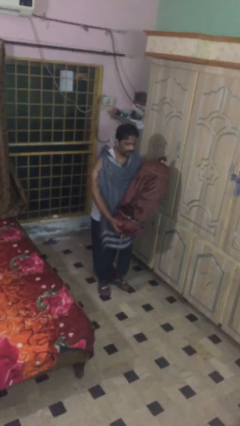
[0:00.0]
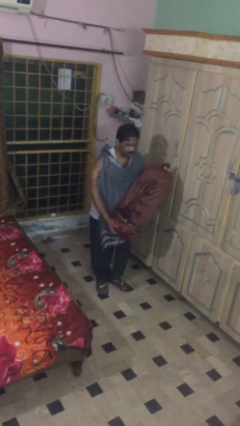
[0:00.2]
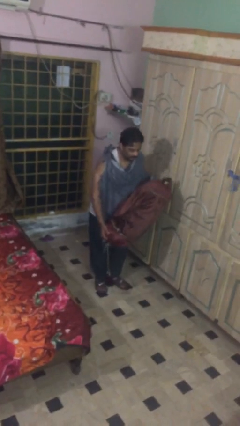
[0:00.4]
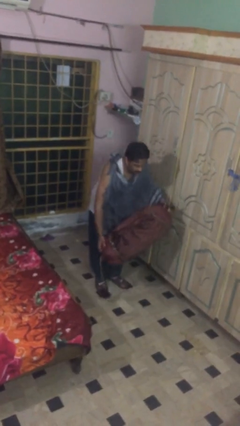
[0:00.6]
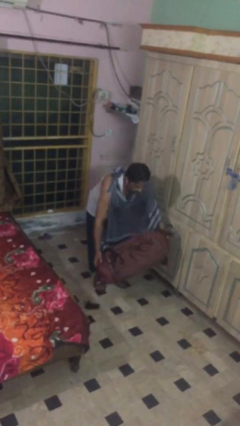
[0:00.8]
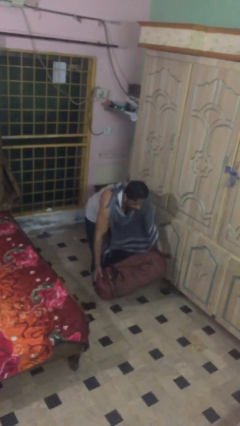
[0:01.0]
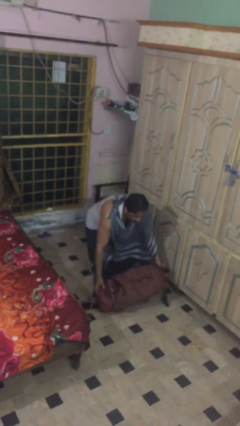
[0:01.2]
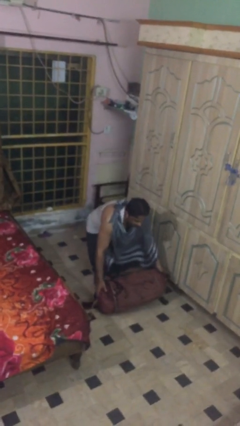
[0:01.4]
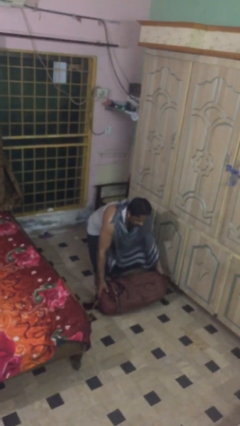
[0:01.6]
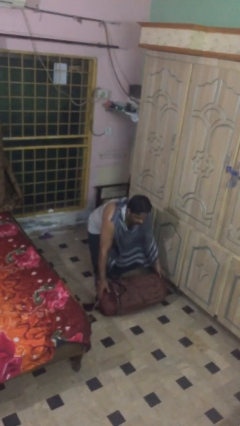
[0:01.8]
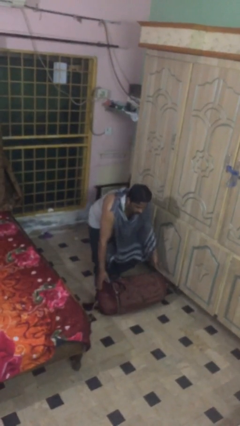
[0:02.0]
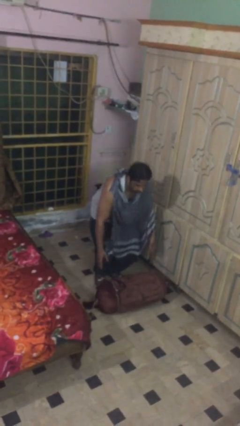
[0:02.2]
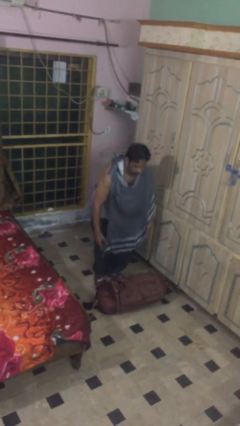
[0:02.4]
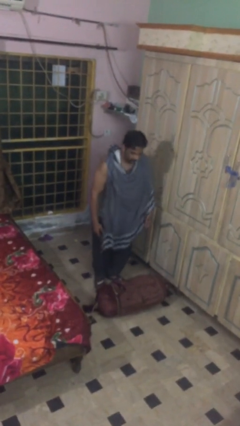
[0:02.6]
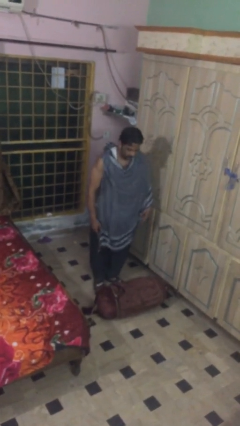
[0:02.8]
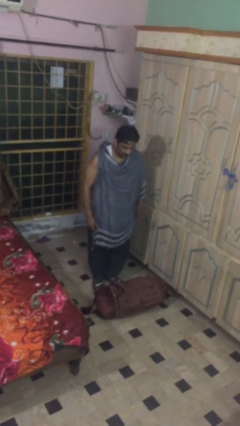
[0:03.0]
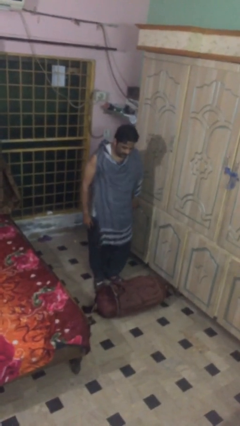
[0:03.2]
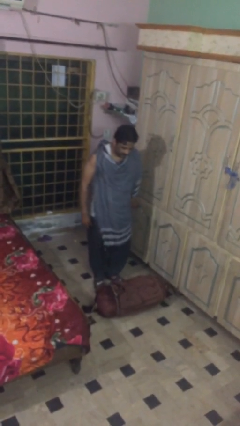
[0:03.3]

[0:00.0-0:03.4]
person puts down object on floor

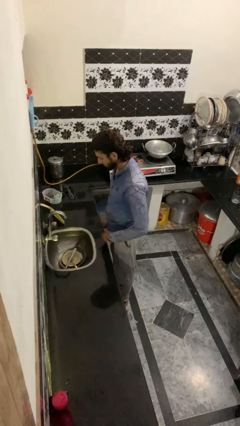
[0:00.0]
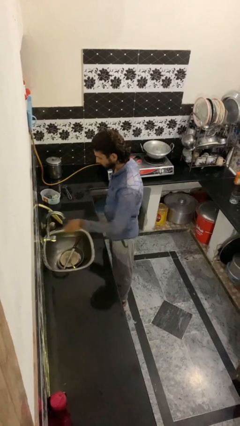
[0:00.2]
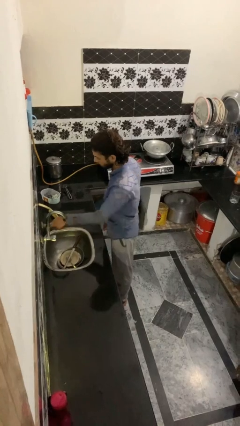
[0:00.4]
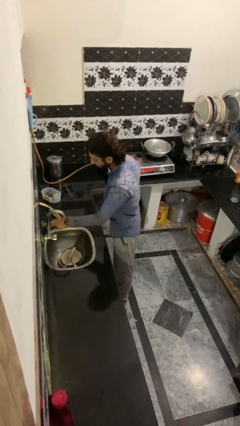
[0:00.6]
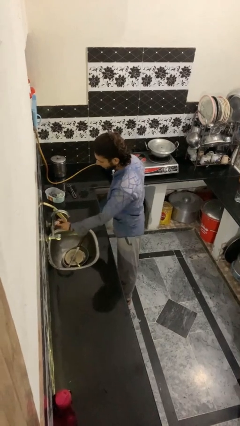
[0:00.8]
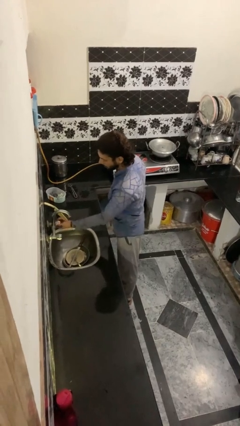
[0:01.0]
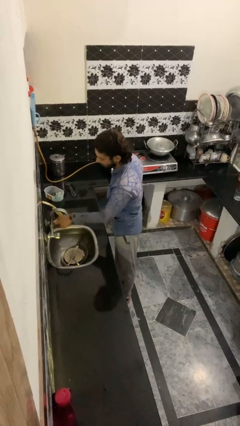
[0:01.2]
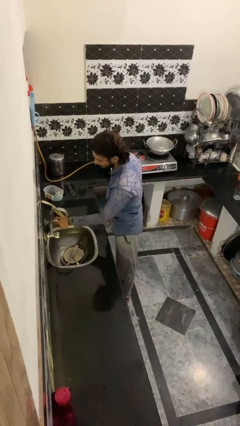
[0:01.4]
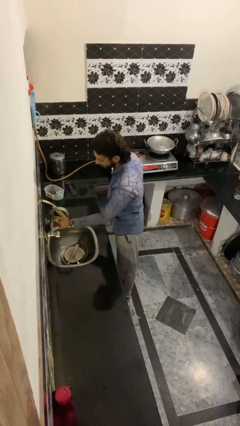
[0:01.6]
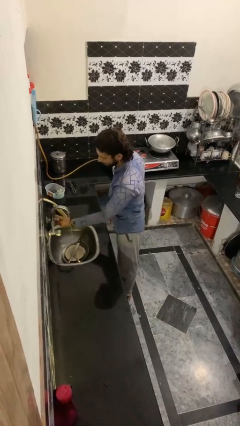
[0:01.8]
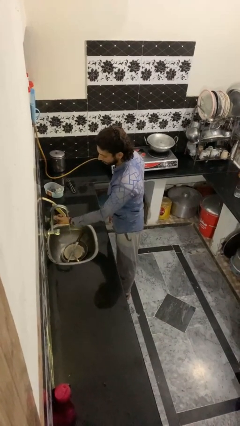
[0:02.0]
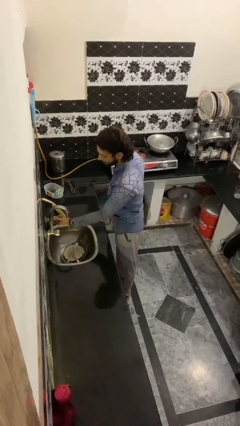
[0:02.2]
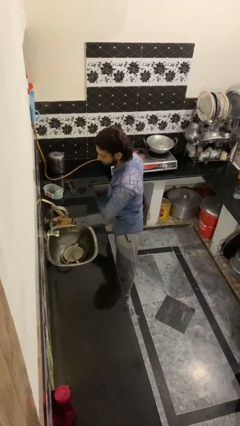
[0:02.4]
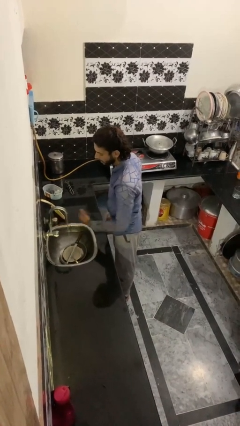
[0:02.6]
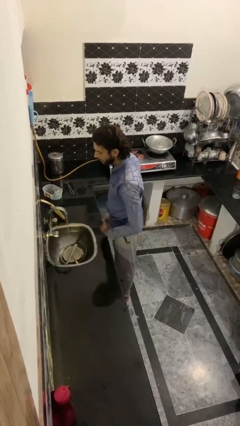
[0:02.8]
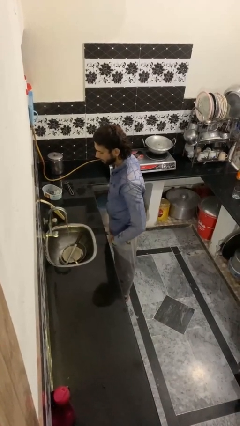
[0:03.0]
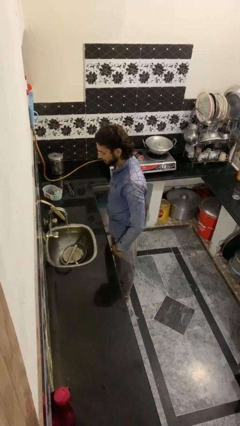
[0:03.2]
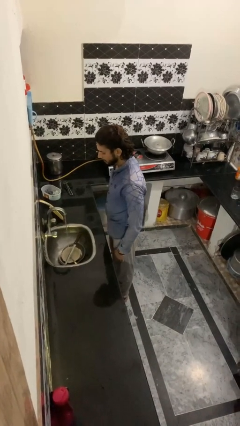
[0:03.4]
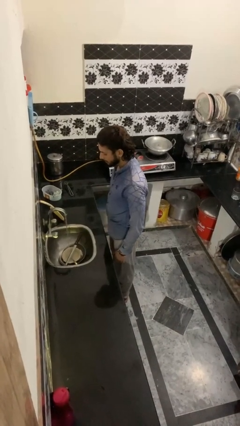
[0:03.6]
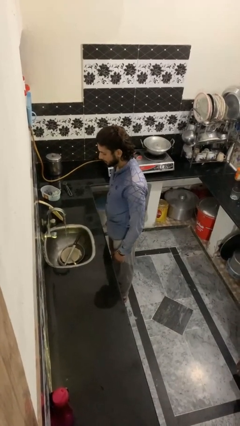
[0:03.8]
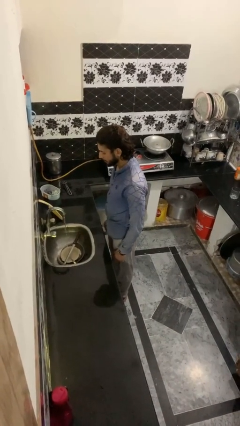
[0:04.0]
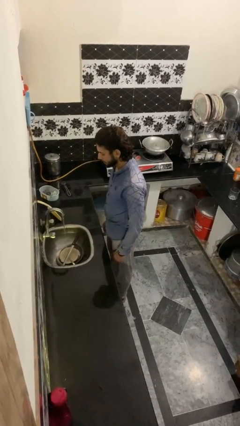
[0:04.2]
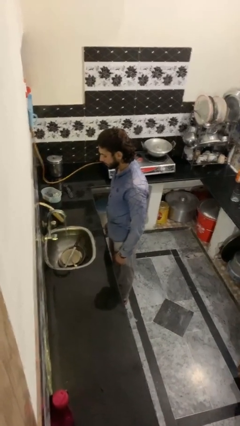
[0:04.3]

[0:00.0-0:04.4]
person turns on faucet

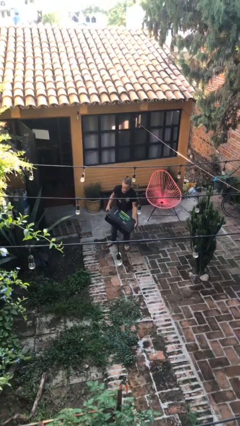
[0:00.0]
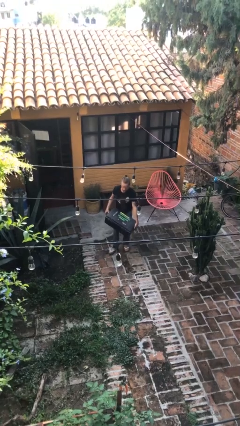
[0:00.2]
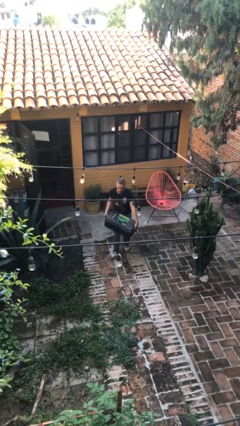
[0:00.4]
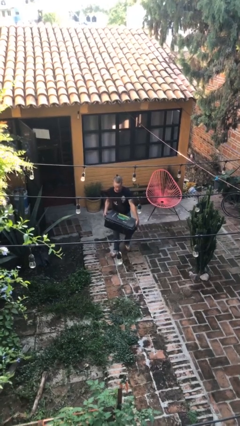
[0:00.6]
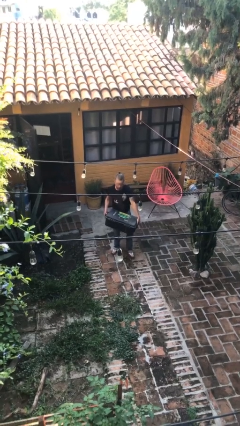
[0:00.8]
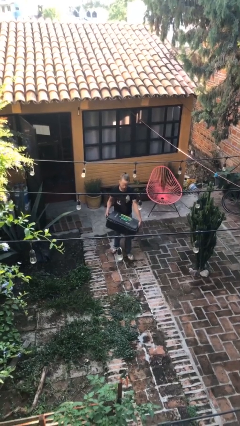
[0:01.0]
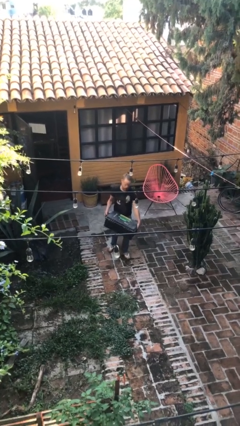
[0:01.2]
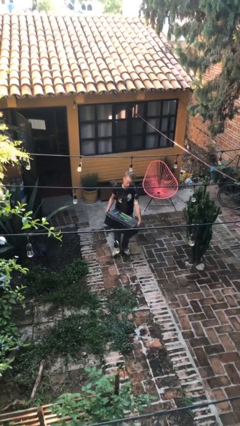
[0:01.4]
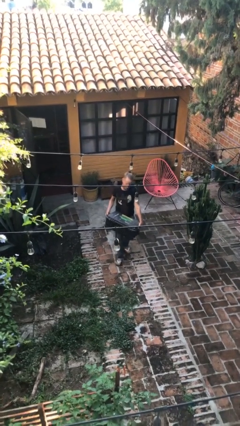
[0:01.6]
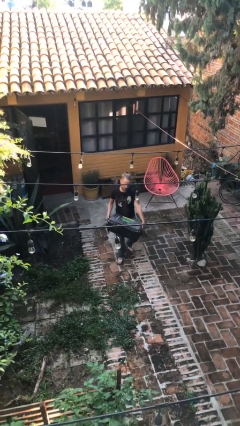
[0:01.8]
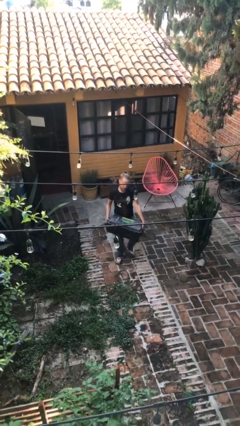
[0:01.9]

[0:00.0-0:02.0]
person carries heavy object

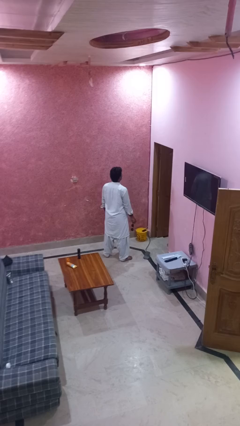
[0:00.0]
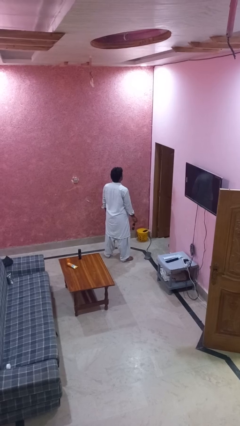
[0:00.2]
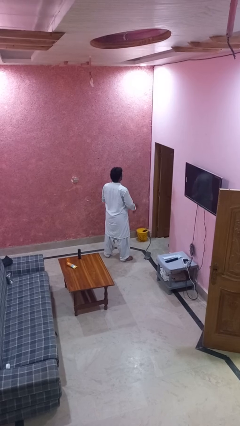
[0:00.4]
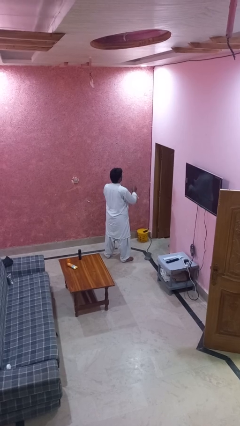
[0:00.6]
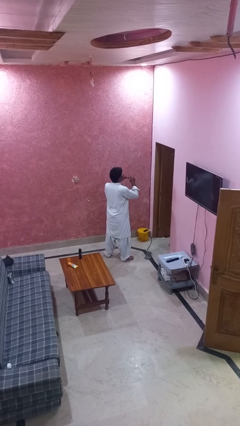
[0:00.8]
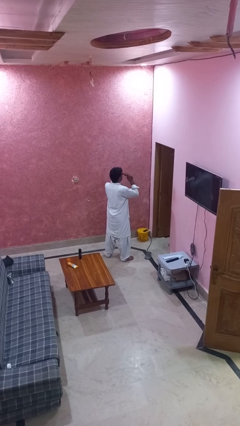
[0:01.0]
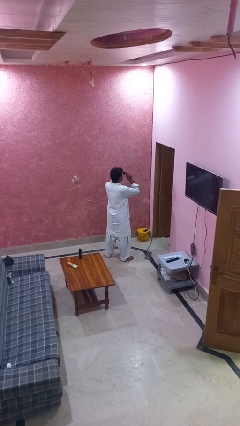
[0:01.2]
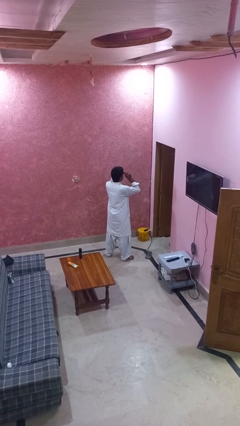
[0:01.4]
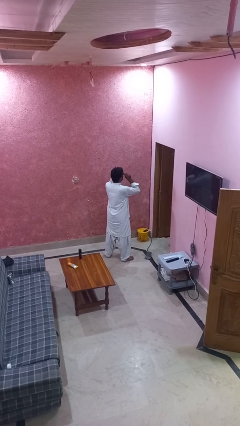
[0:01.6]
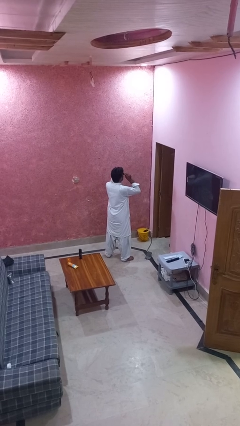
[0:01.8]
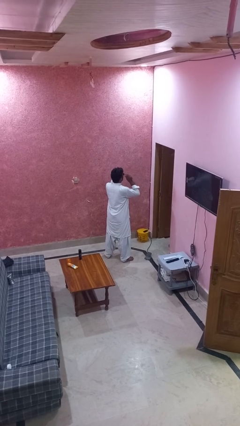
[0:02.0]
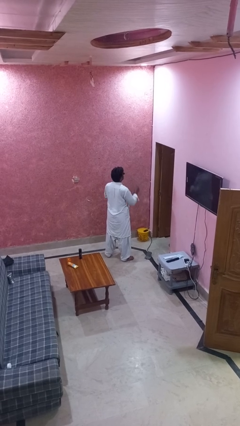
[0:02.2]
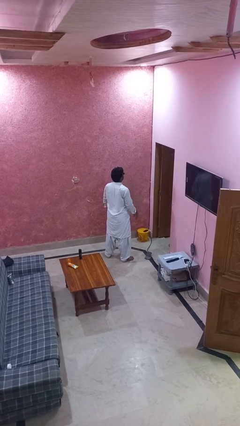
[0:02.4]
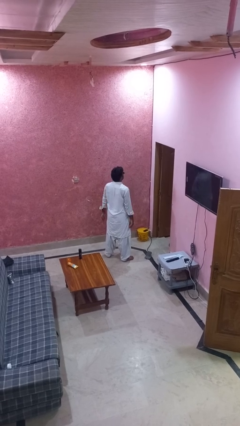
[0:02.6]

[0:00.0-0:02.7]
person puts on sunglasses

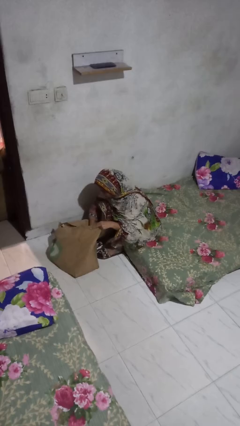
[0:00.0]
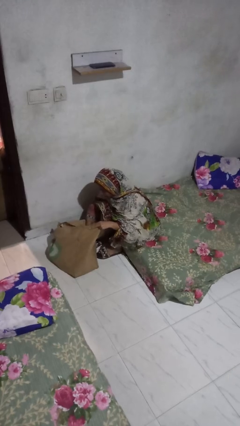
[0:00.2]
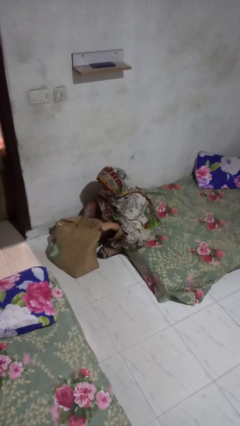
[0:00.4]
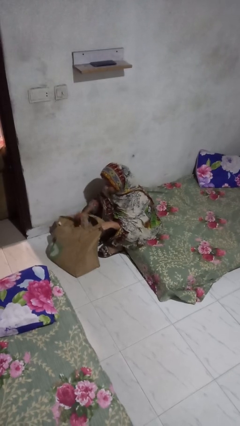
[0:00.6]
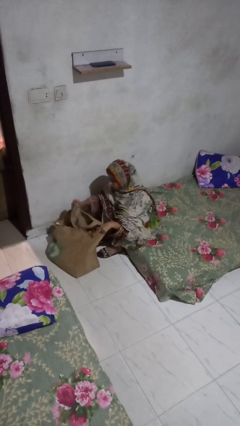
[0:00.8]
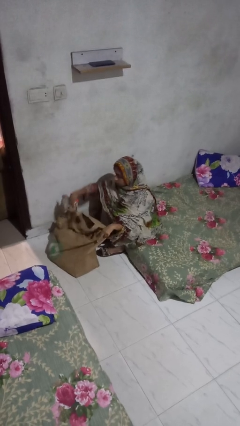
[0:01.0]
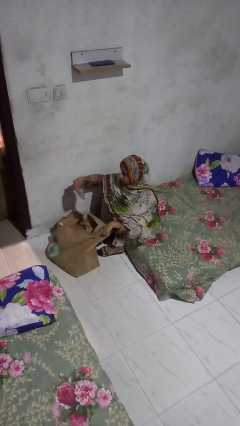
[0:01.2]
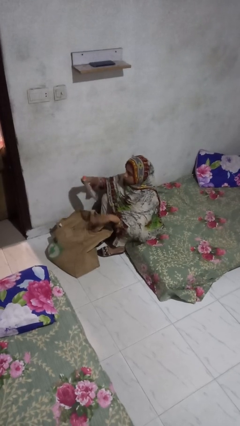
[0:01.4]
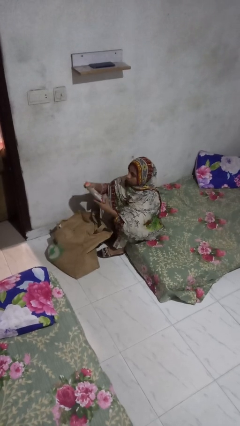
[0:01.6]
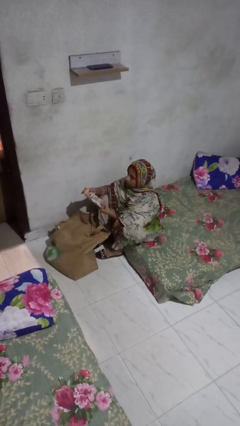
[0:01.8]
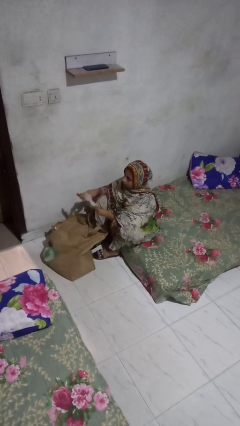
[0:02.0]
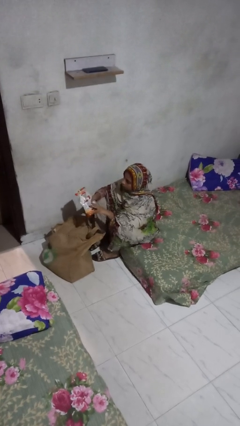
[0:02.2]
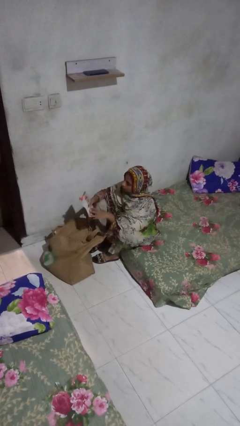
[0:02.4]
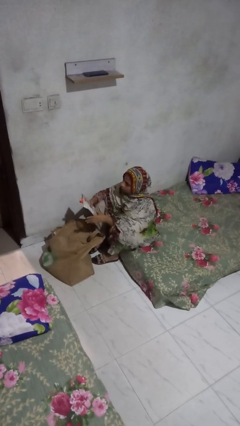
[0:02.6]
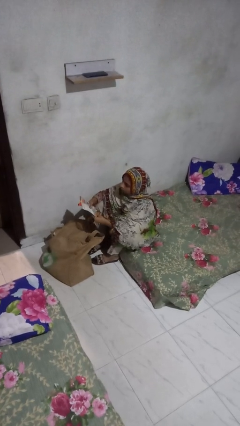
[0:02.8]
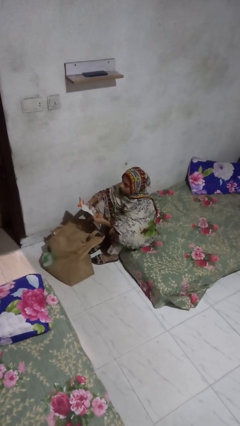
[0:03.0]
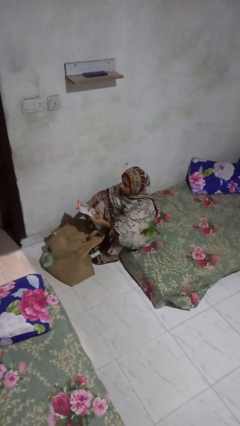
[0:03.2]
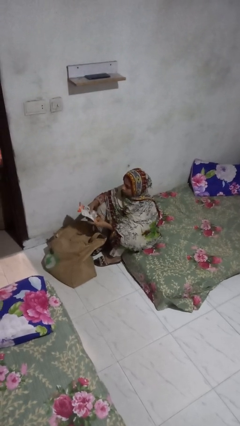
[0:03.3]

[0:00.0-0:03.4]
person takes object from bag

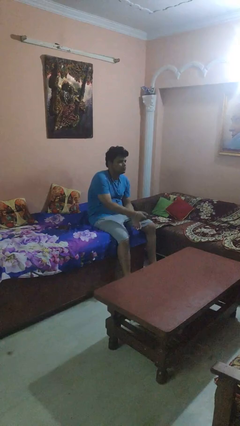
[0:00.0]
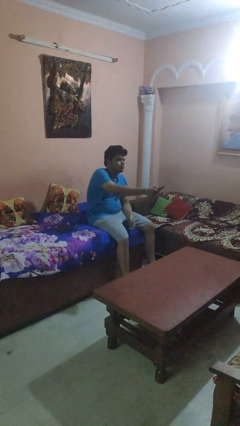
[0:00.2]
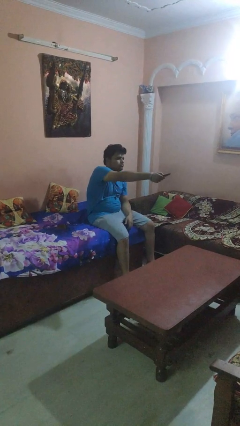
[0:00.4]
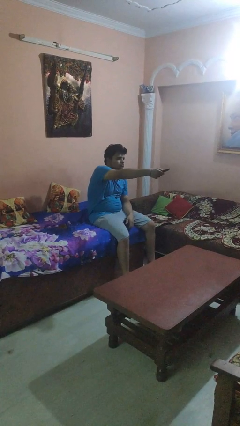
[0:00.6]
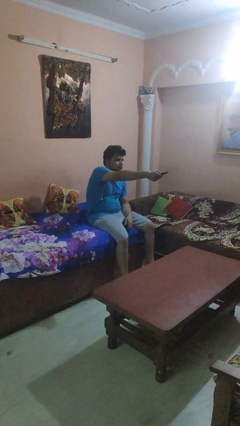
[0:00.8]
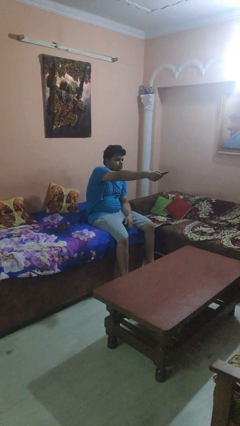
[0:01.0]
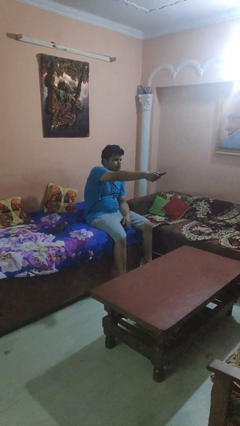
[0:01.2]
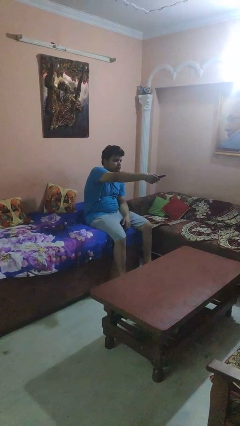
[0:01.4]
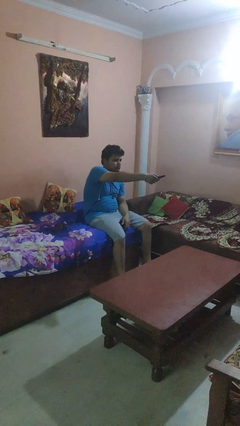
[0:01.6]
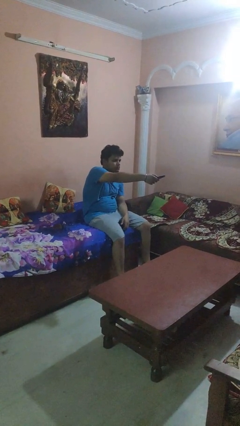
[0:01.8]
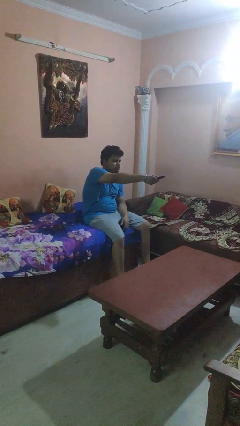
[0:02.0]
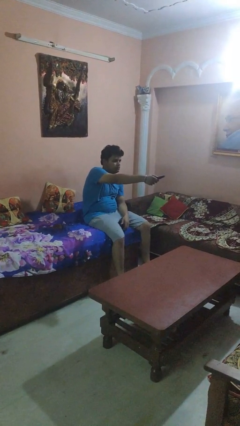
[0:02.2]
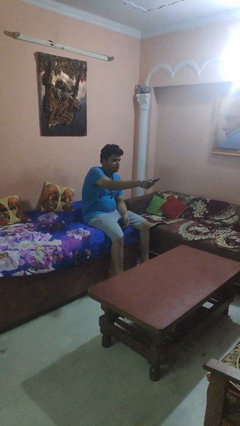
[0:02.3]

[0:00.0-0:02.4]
person uses television remote
